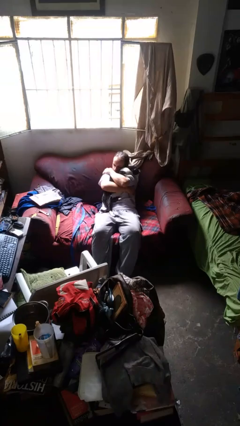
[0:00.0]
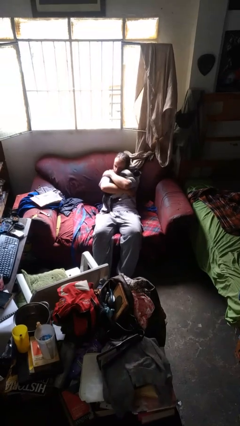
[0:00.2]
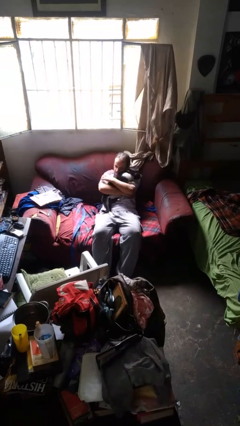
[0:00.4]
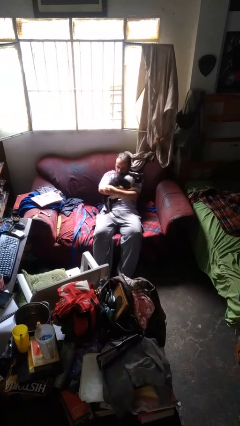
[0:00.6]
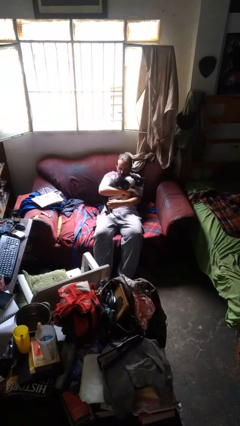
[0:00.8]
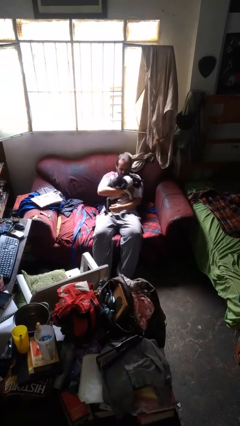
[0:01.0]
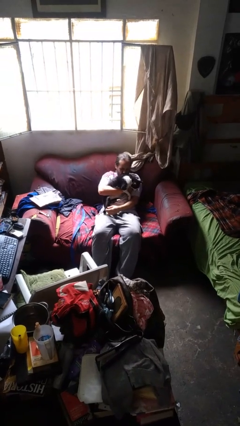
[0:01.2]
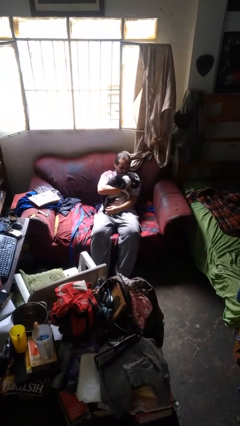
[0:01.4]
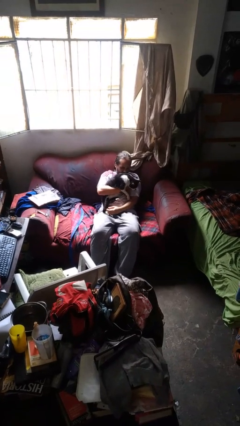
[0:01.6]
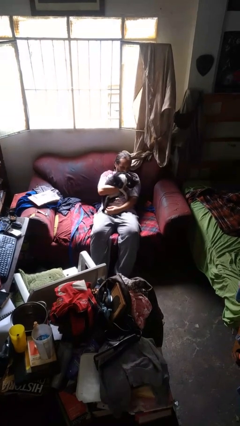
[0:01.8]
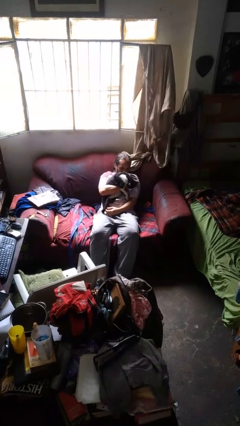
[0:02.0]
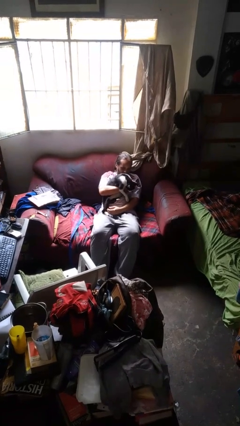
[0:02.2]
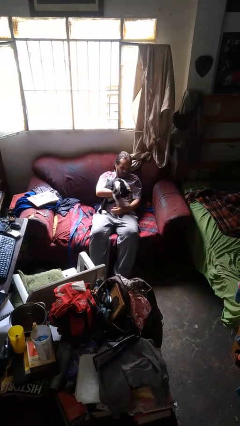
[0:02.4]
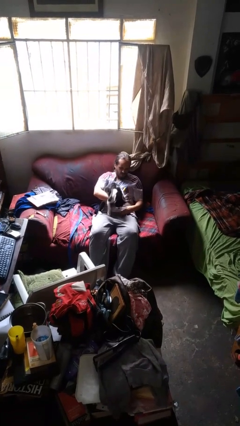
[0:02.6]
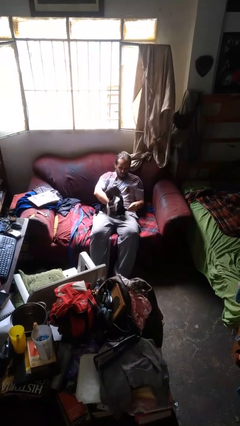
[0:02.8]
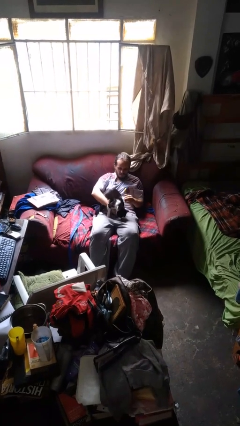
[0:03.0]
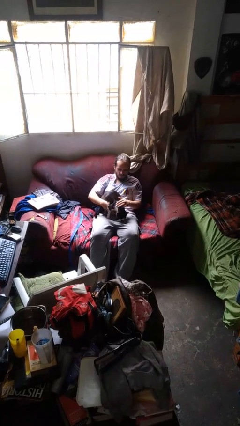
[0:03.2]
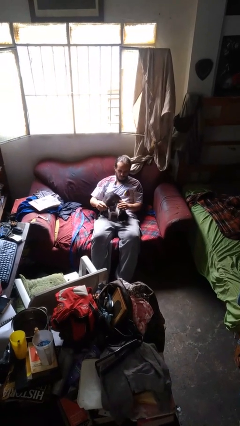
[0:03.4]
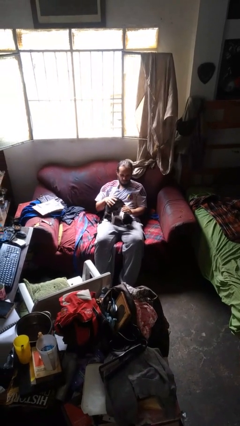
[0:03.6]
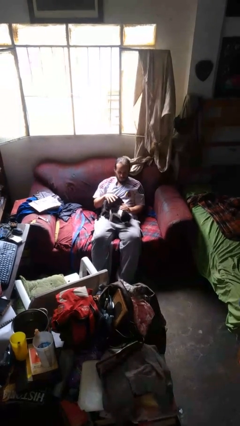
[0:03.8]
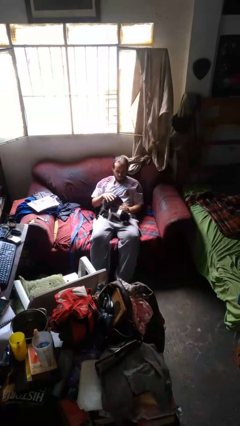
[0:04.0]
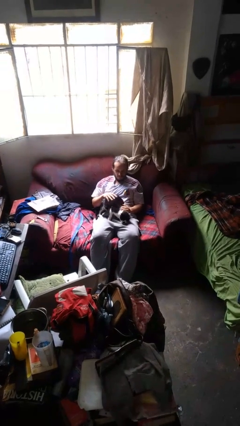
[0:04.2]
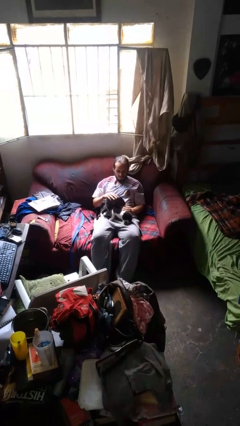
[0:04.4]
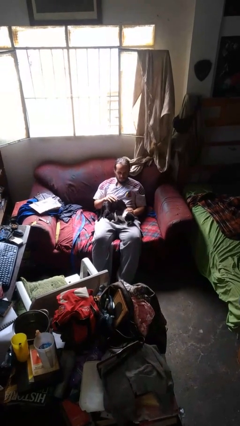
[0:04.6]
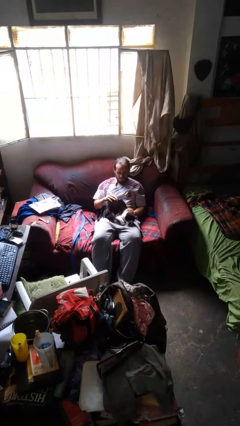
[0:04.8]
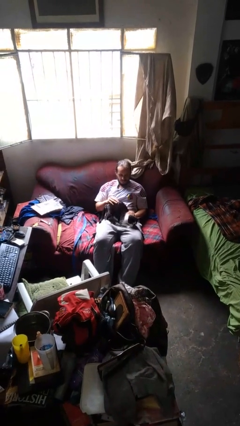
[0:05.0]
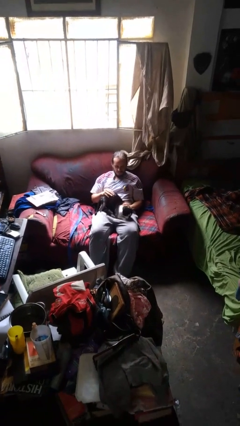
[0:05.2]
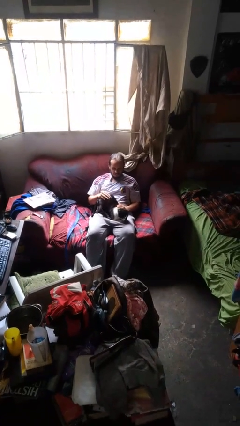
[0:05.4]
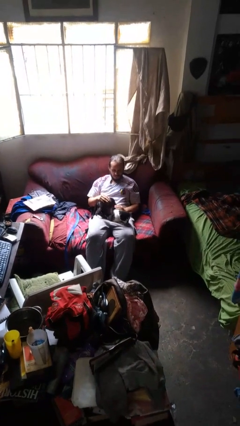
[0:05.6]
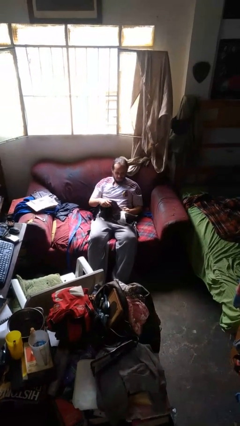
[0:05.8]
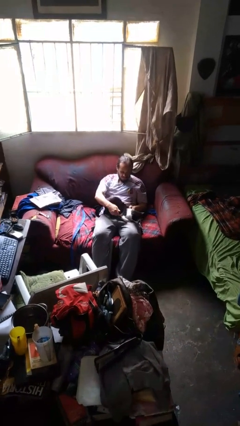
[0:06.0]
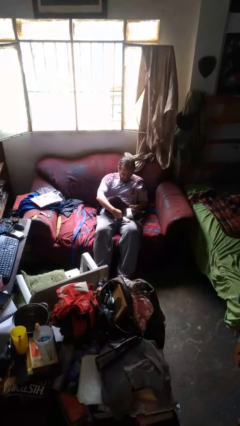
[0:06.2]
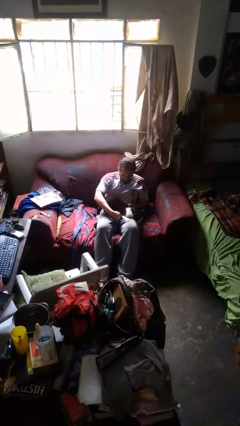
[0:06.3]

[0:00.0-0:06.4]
person hugs dog

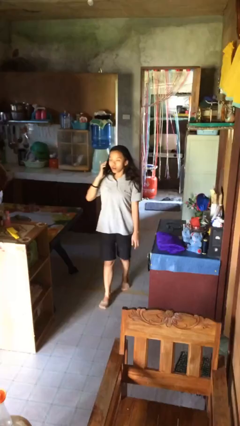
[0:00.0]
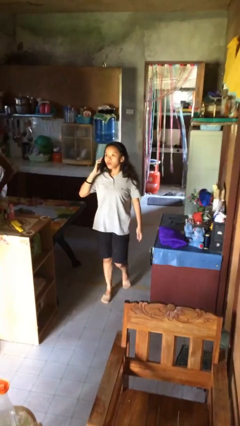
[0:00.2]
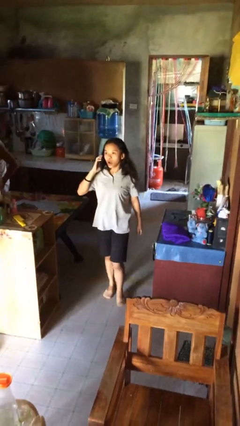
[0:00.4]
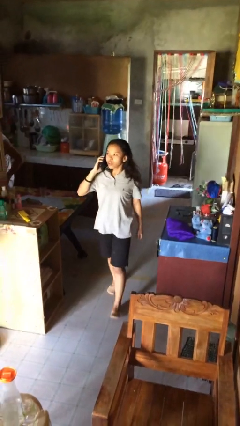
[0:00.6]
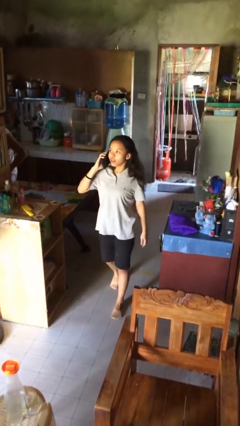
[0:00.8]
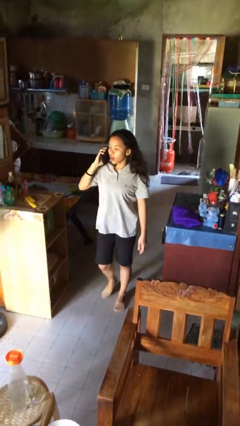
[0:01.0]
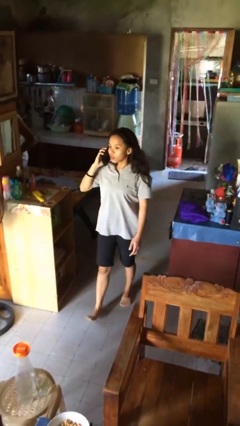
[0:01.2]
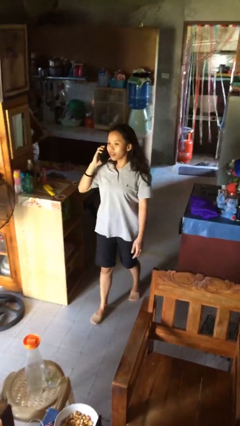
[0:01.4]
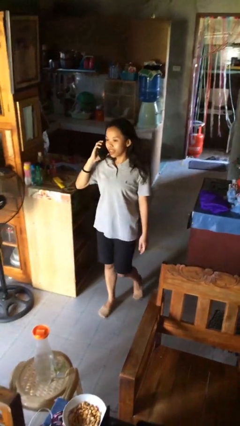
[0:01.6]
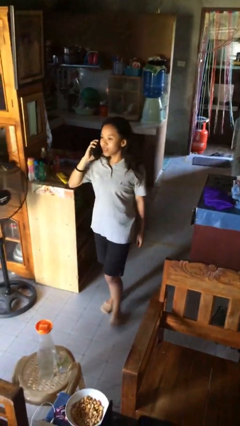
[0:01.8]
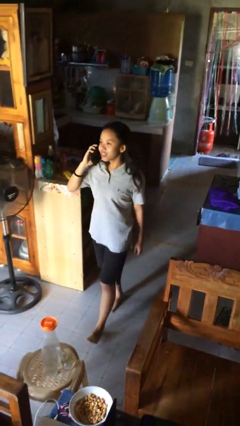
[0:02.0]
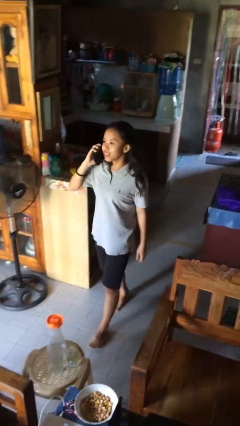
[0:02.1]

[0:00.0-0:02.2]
person talks on phone

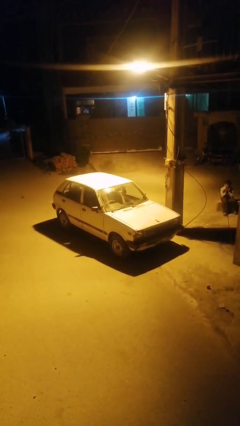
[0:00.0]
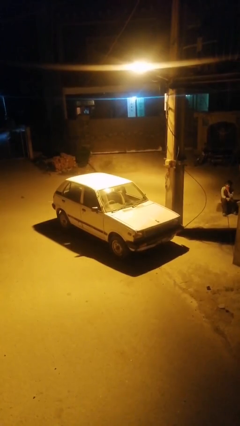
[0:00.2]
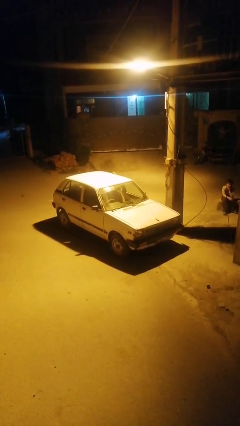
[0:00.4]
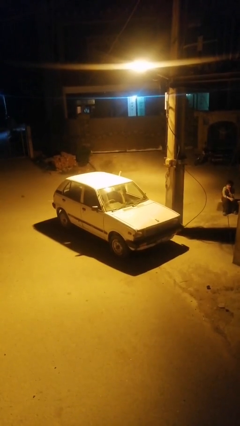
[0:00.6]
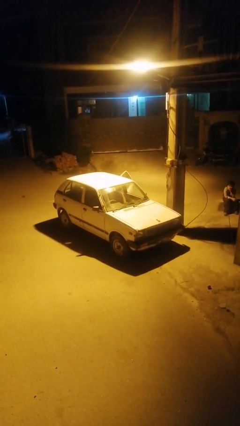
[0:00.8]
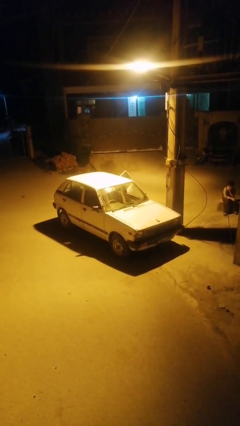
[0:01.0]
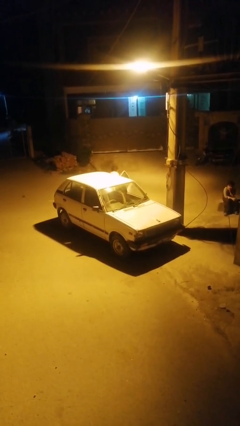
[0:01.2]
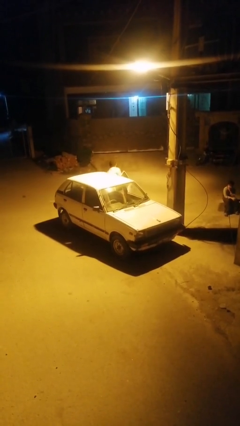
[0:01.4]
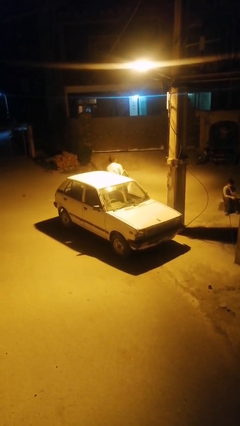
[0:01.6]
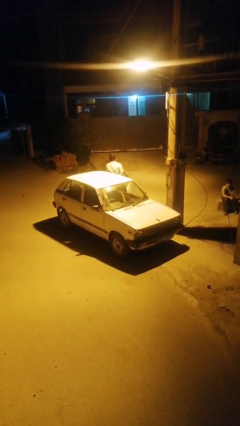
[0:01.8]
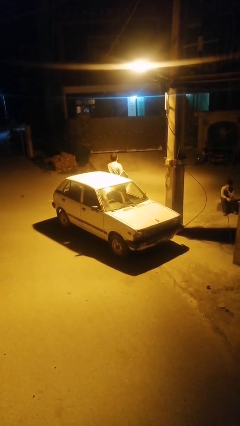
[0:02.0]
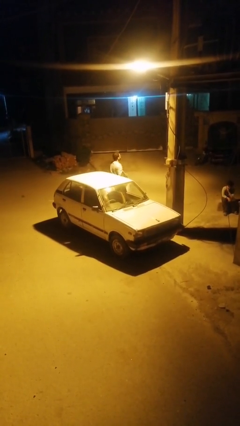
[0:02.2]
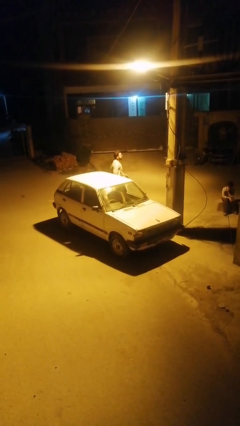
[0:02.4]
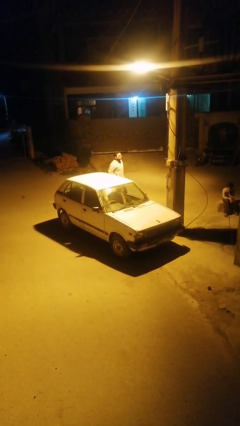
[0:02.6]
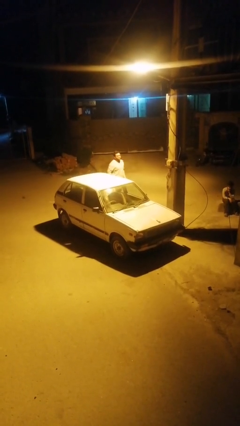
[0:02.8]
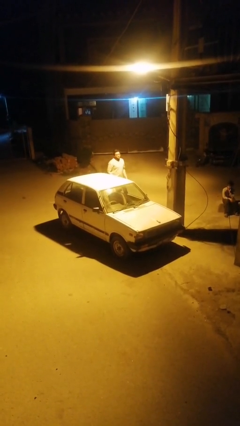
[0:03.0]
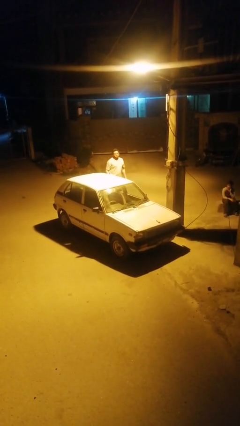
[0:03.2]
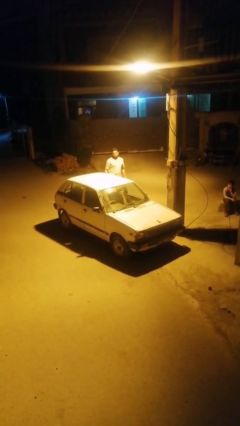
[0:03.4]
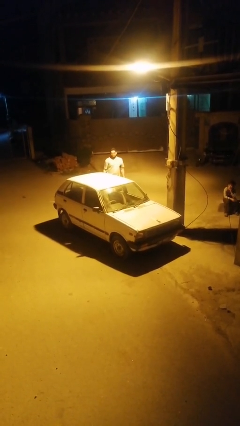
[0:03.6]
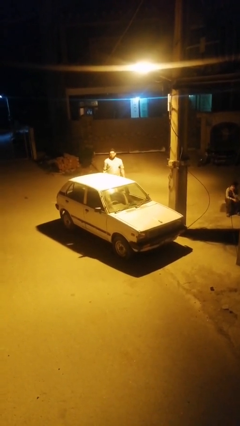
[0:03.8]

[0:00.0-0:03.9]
car drops off person

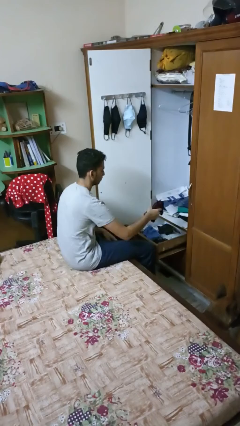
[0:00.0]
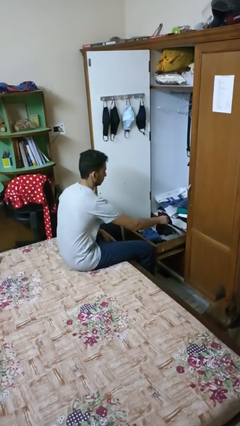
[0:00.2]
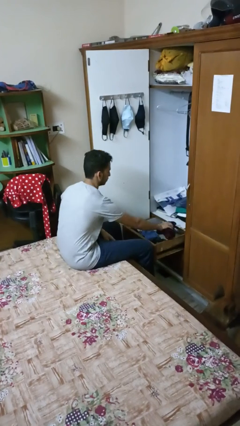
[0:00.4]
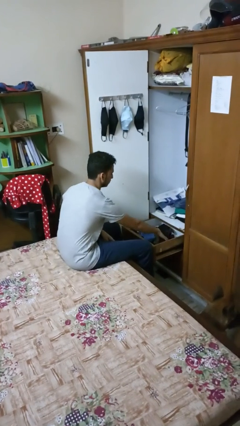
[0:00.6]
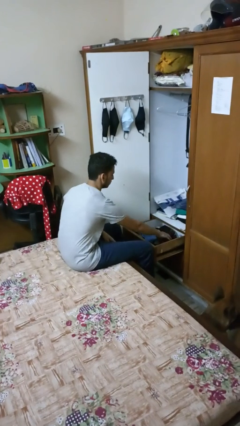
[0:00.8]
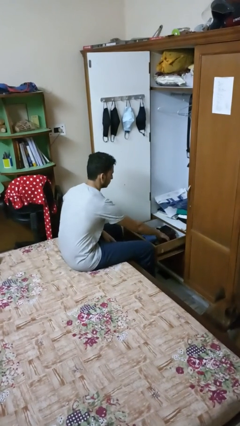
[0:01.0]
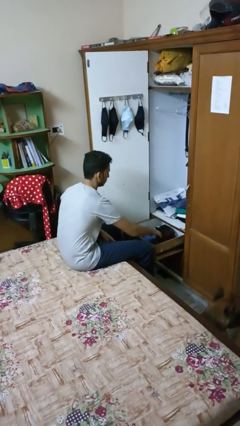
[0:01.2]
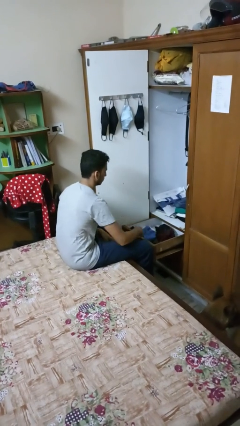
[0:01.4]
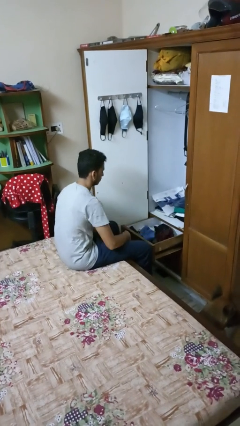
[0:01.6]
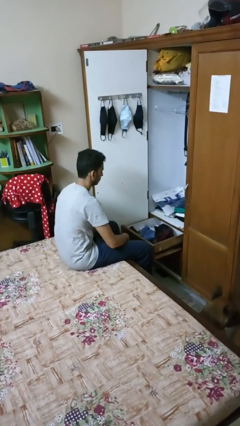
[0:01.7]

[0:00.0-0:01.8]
person puts clothes into dresser

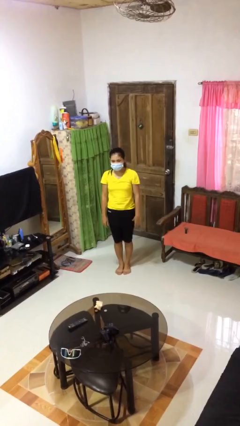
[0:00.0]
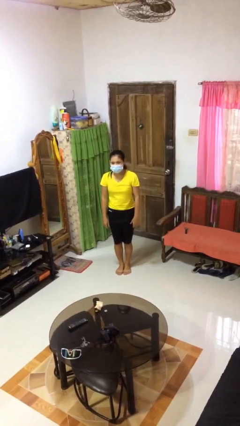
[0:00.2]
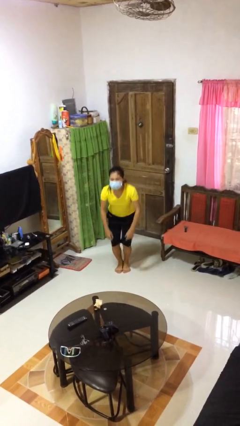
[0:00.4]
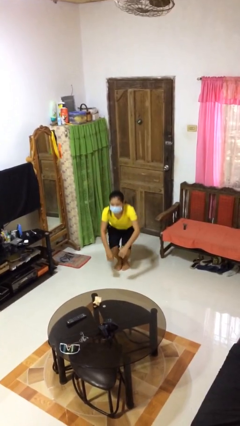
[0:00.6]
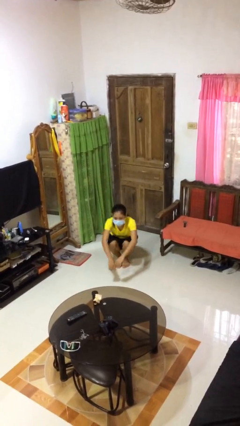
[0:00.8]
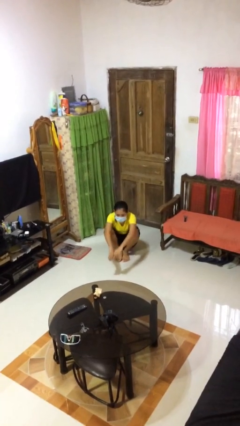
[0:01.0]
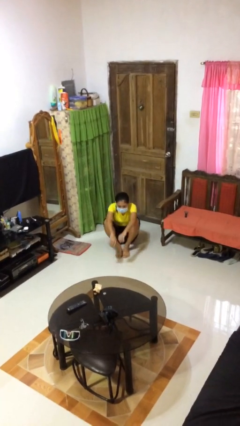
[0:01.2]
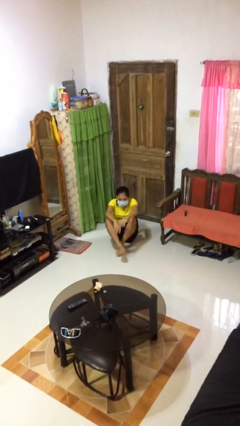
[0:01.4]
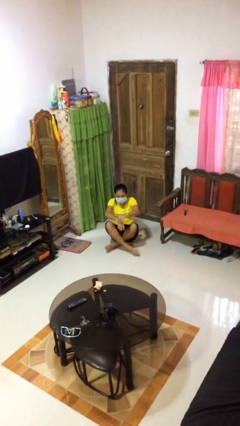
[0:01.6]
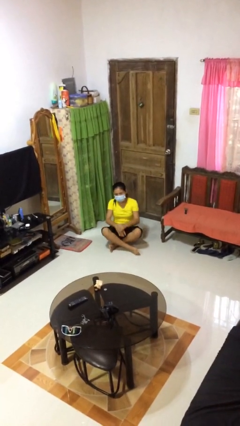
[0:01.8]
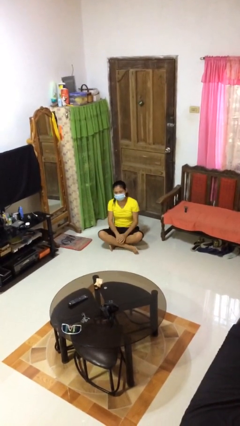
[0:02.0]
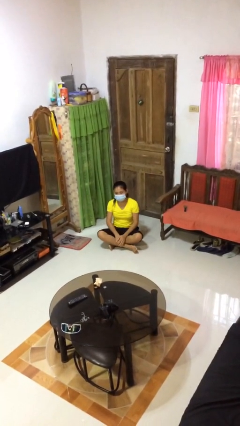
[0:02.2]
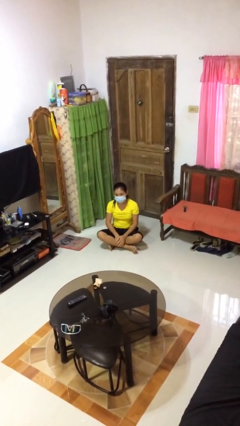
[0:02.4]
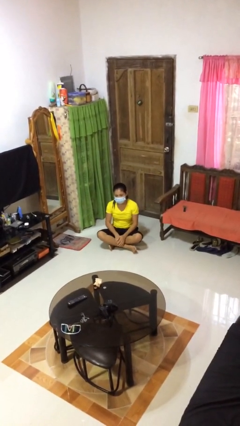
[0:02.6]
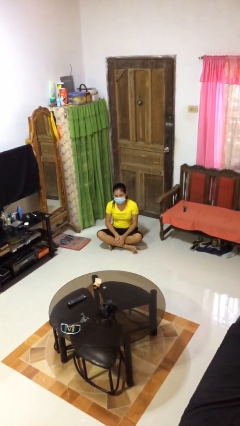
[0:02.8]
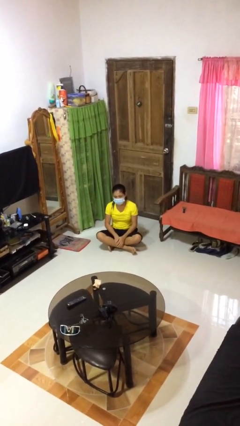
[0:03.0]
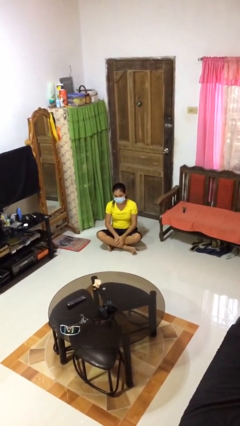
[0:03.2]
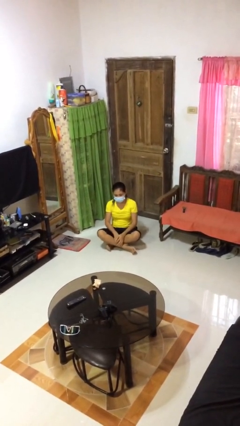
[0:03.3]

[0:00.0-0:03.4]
person sits crisscross
